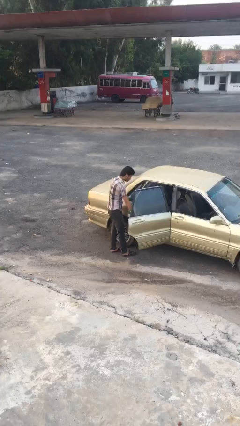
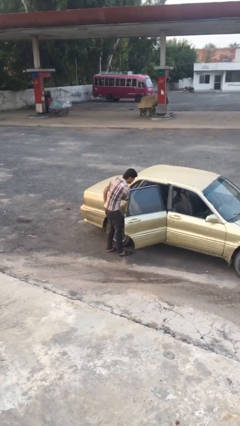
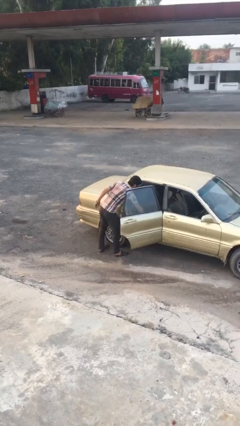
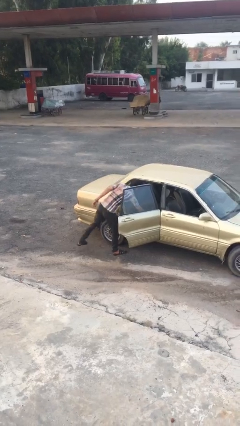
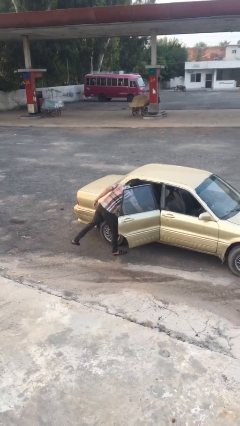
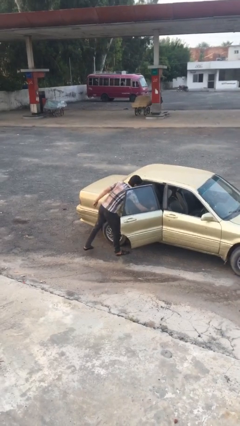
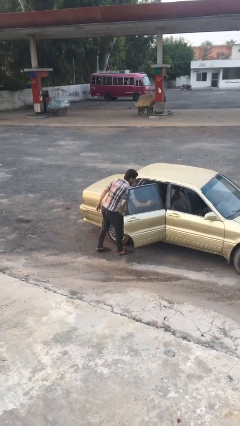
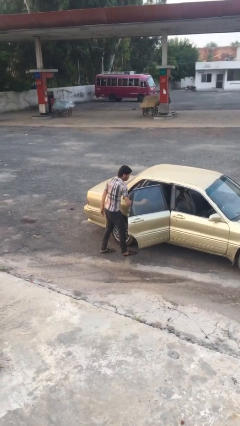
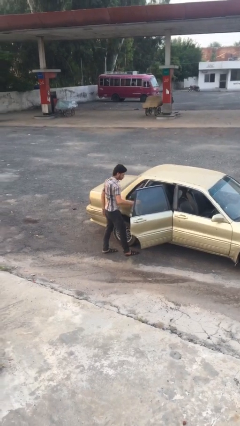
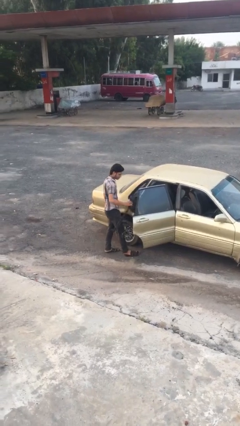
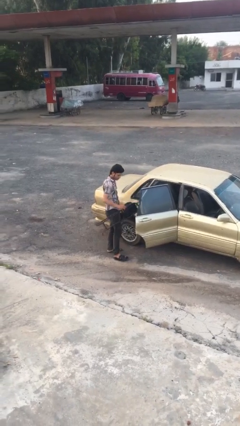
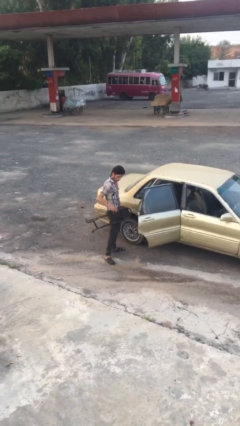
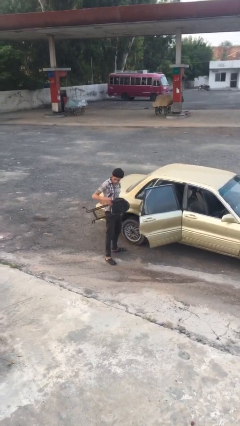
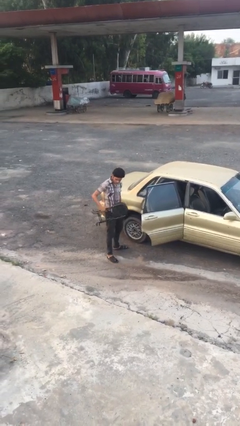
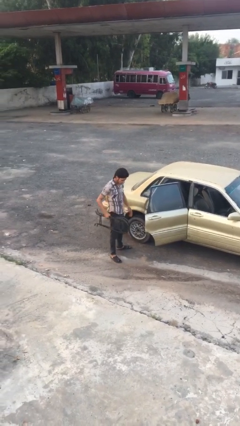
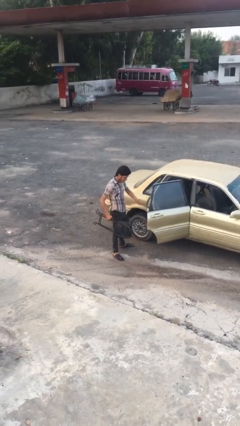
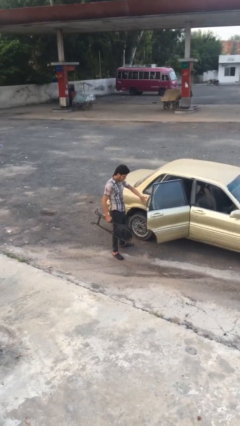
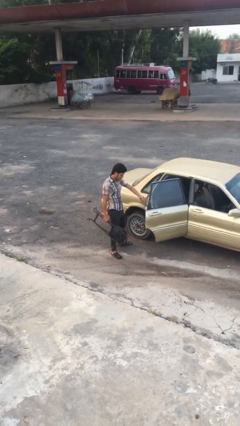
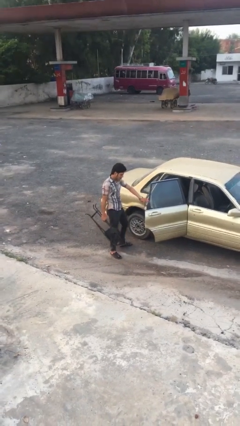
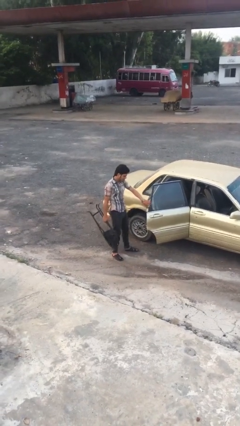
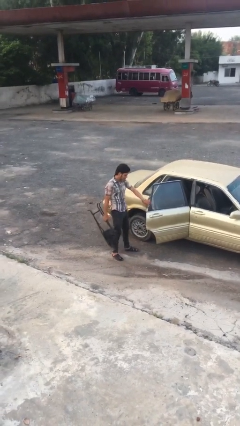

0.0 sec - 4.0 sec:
person unloads car

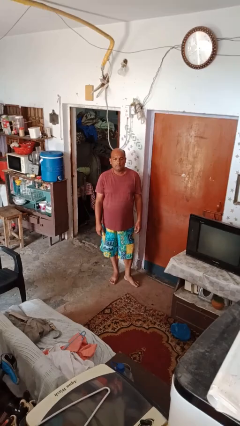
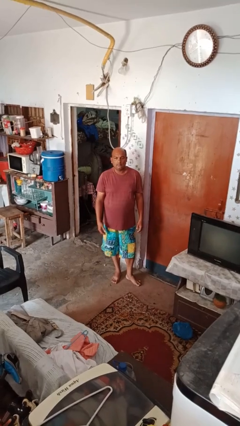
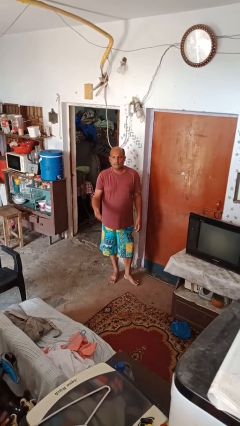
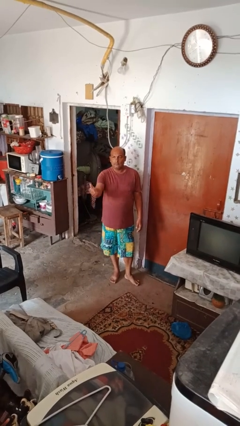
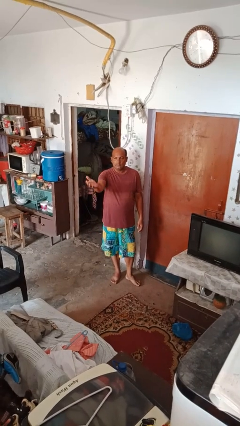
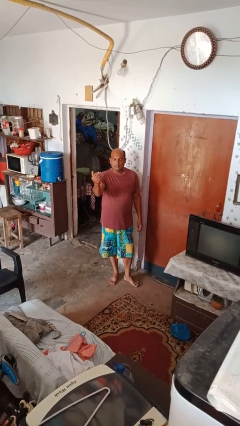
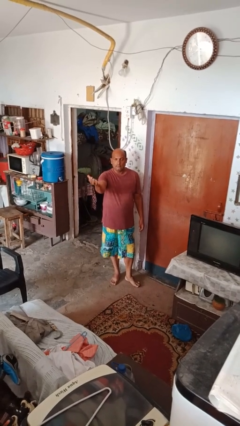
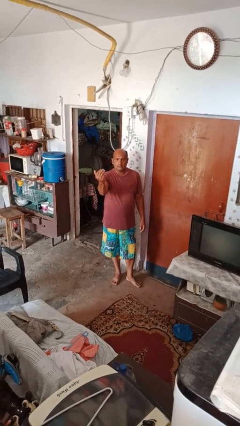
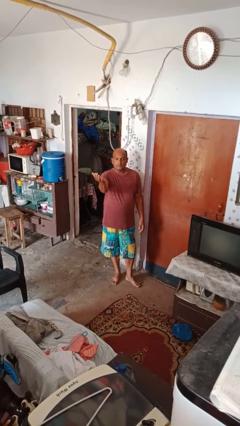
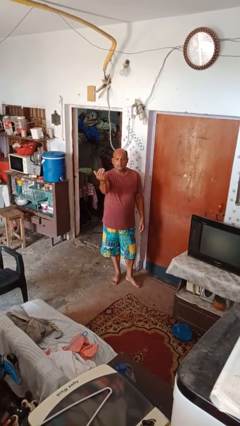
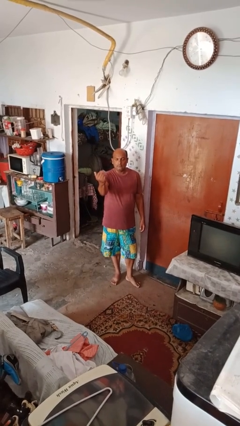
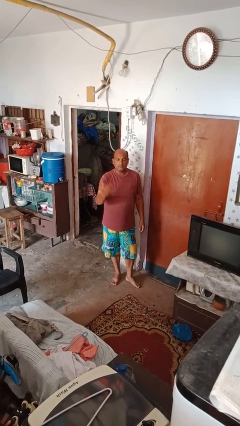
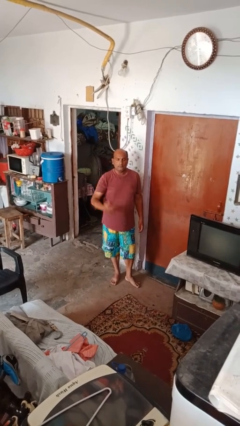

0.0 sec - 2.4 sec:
person gestures come here

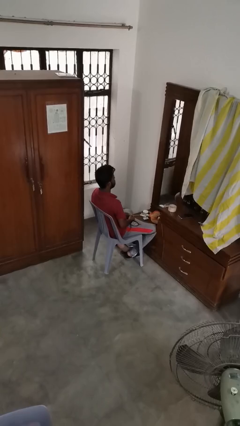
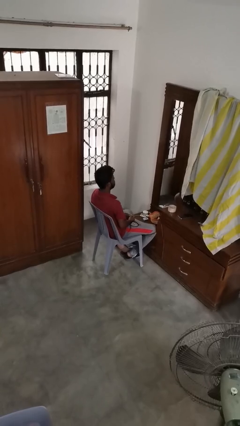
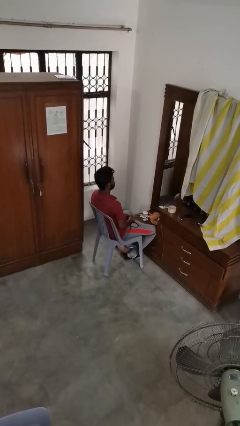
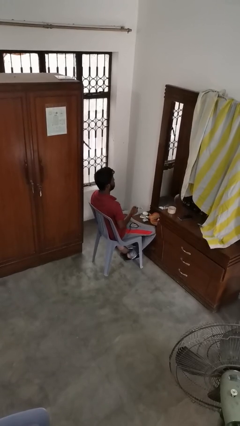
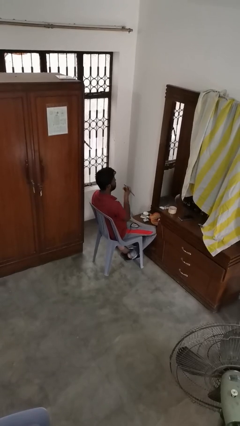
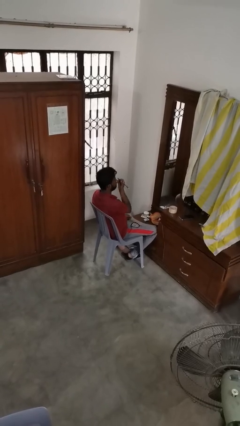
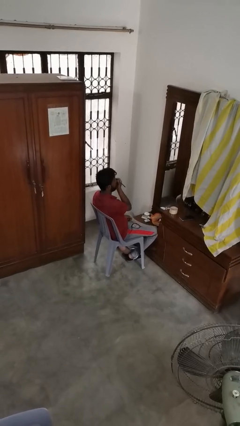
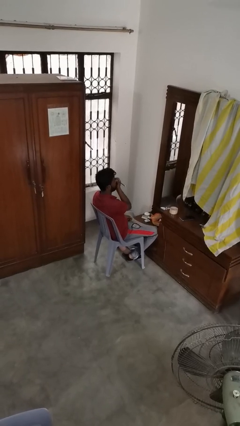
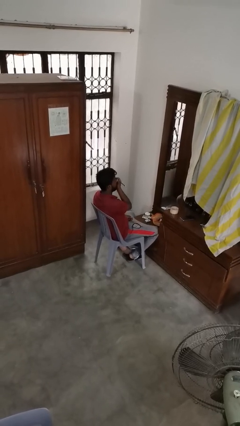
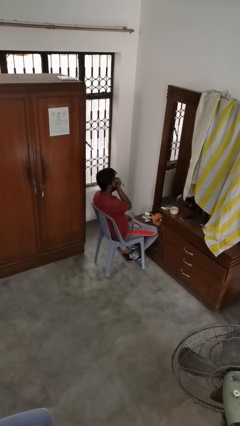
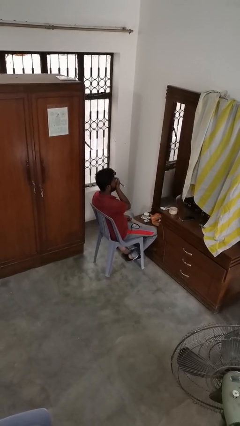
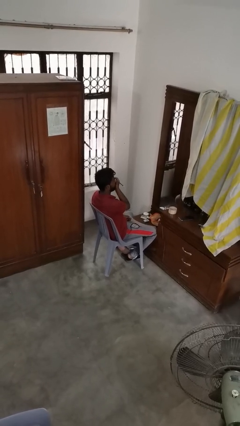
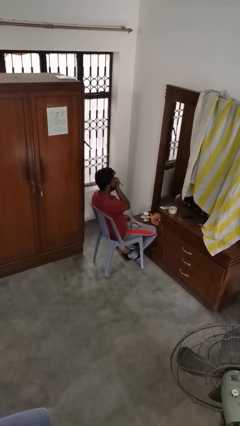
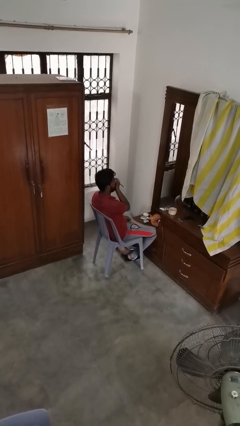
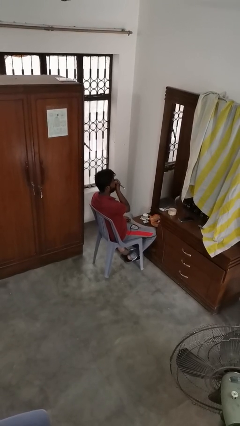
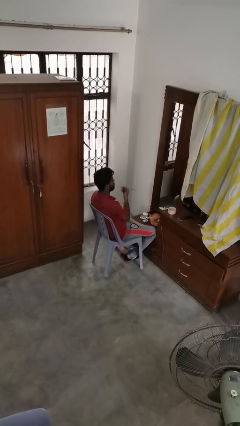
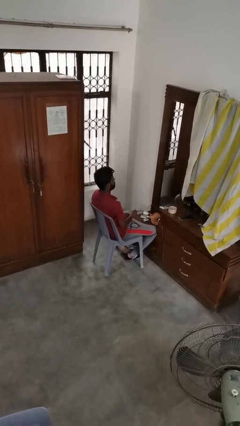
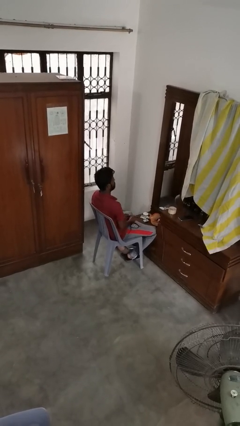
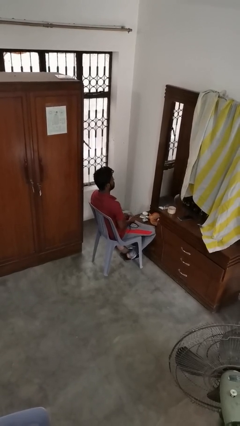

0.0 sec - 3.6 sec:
person applies eye makeup

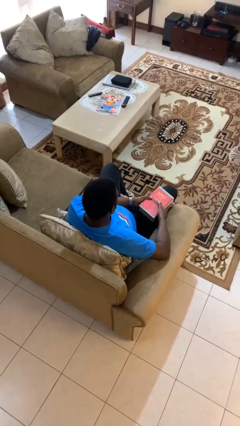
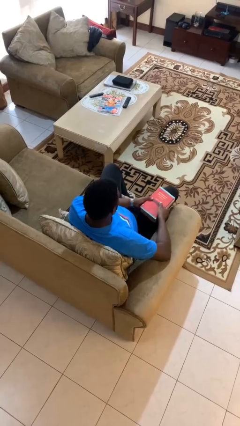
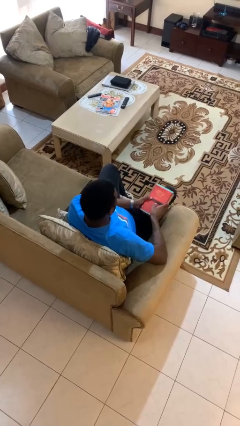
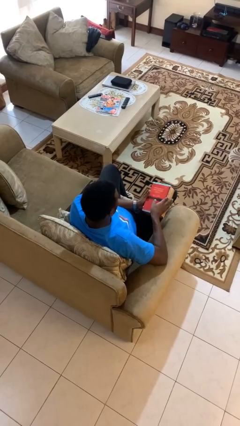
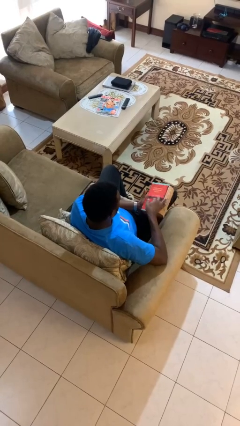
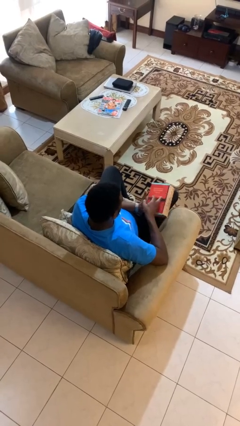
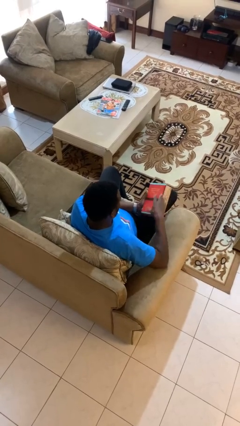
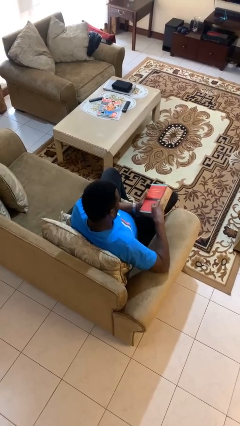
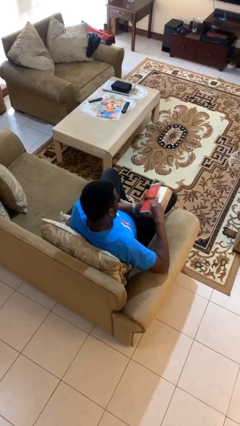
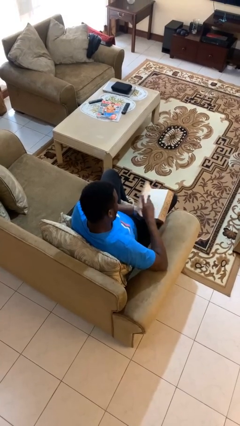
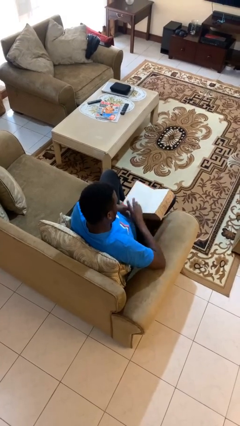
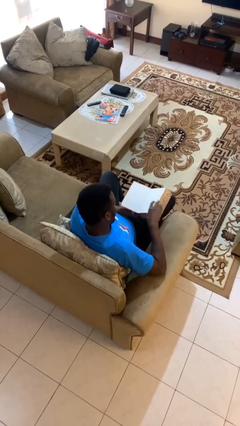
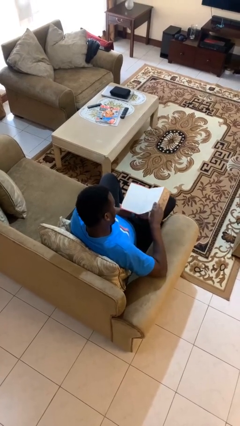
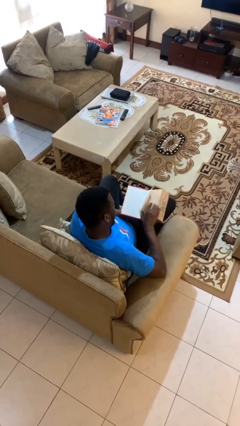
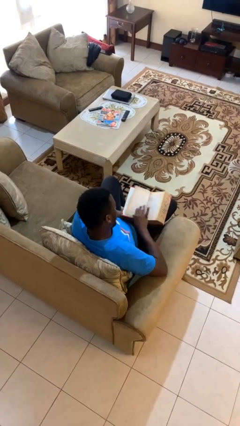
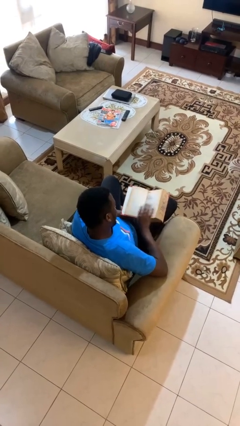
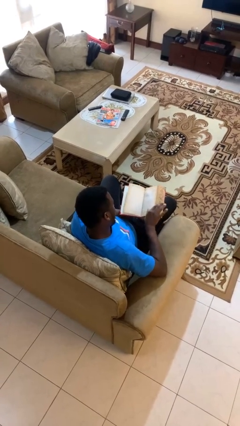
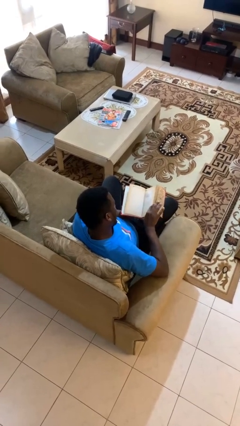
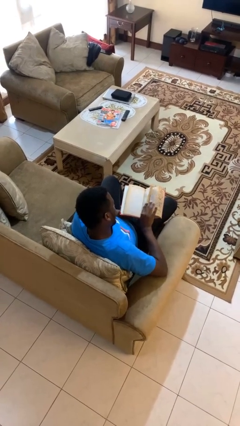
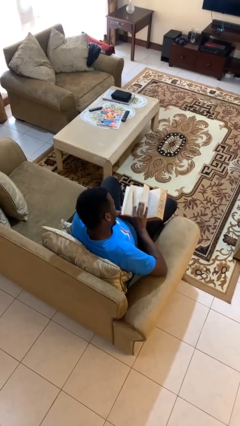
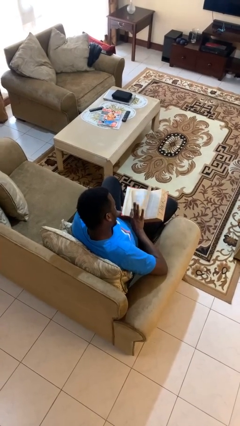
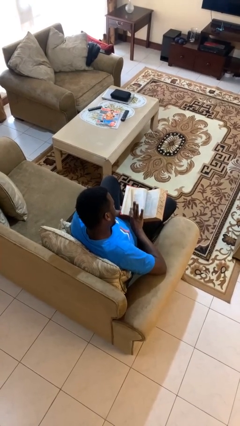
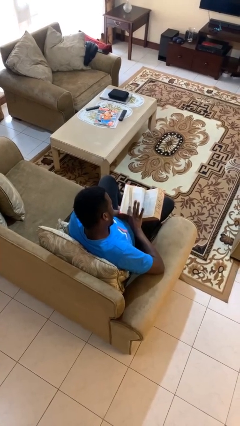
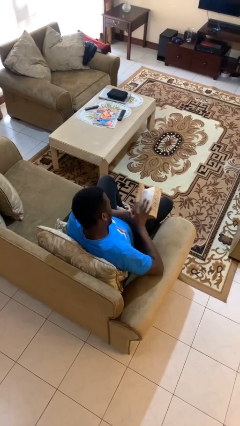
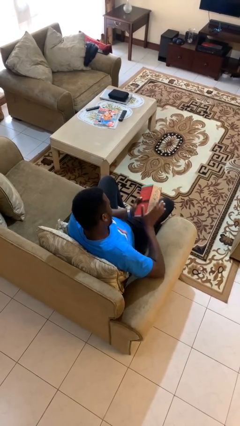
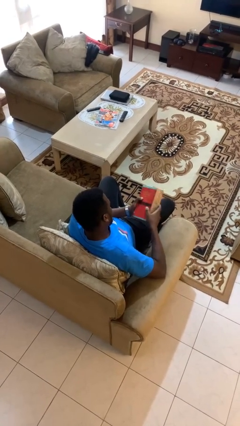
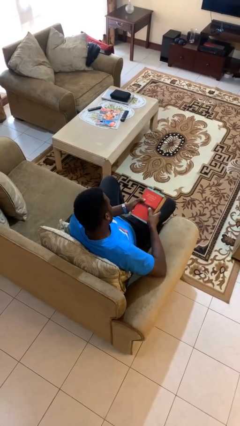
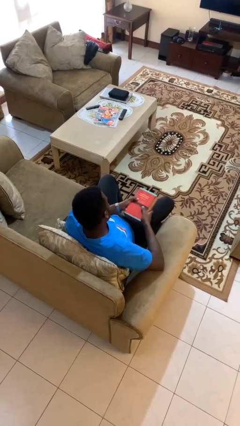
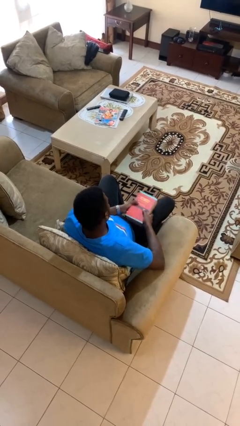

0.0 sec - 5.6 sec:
person reads book

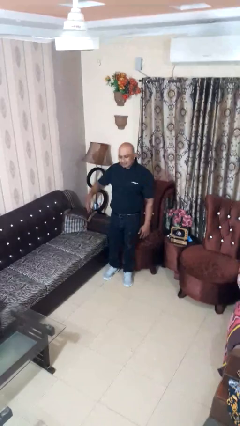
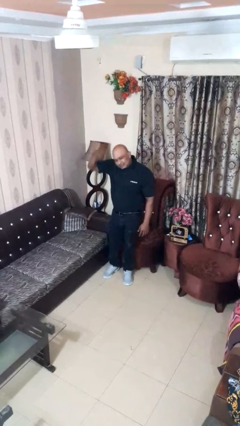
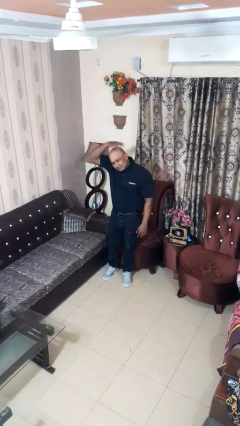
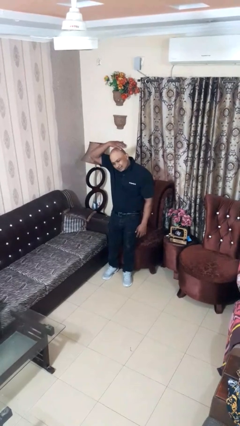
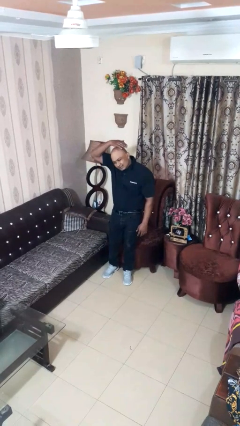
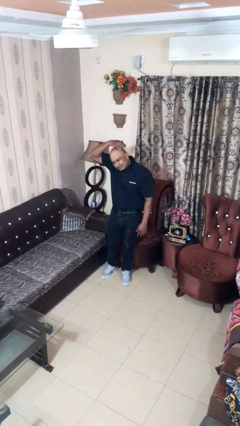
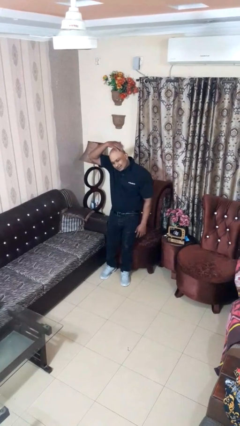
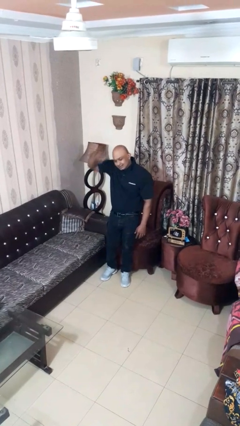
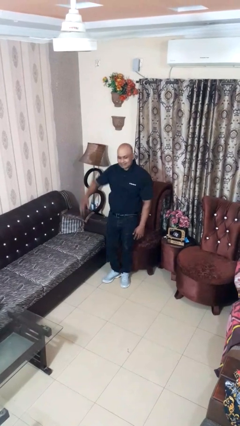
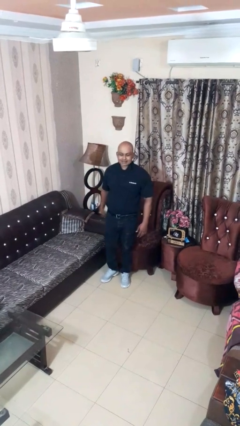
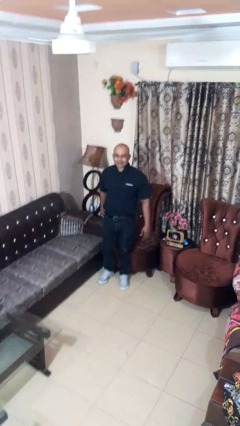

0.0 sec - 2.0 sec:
person pats head
